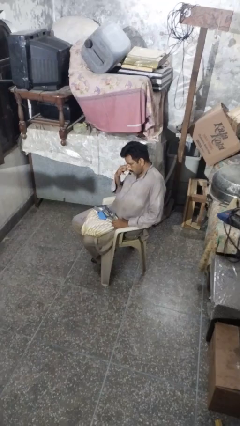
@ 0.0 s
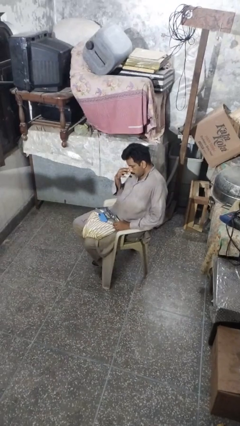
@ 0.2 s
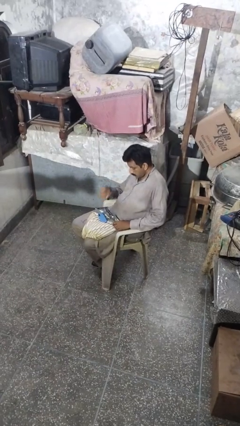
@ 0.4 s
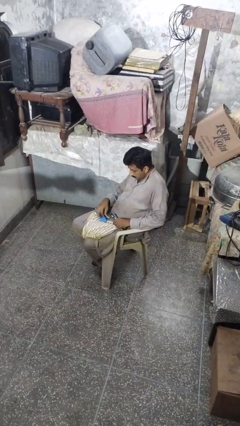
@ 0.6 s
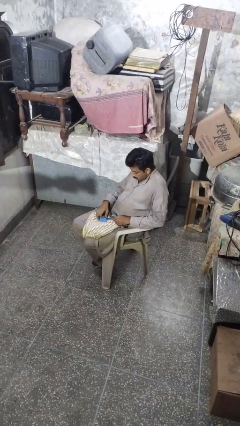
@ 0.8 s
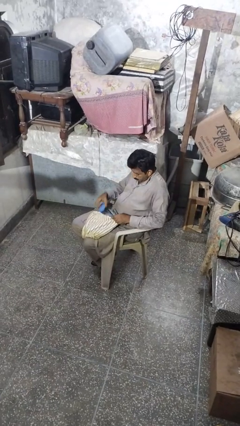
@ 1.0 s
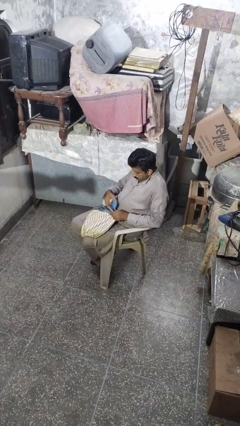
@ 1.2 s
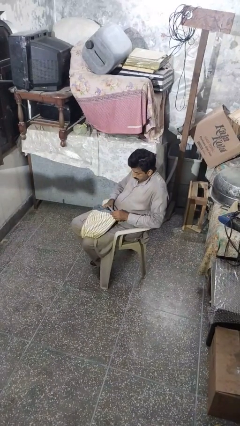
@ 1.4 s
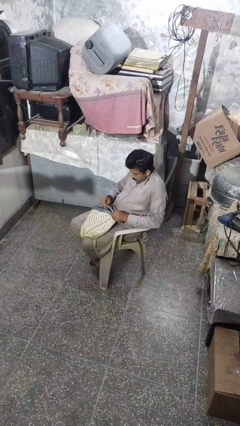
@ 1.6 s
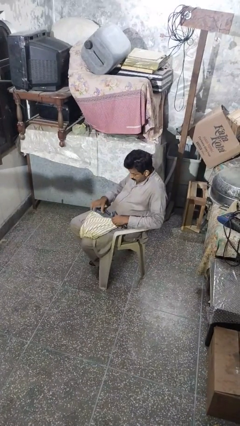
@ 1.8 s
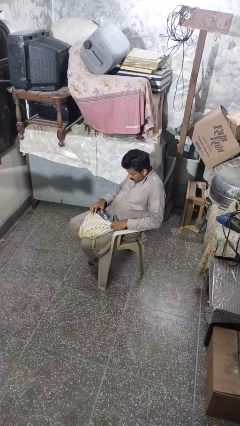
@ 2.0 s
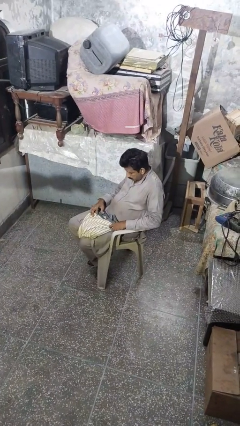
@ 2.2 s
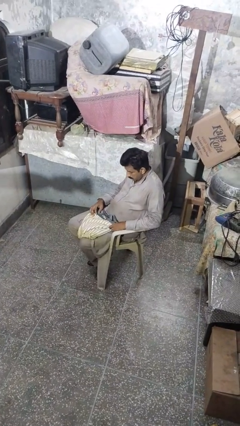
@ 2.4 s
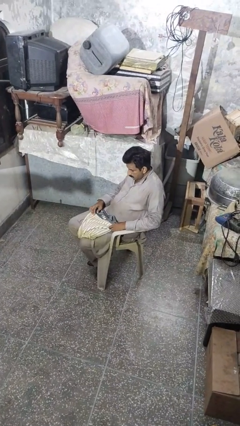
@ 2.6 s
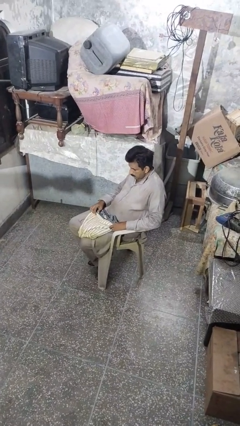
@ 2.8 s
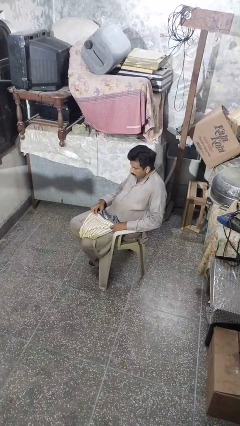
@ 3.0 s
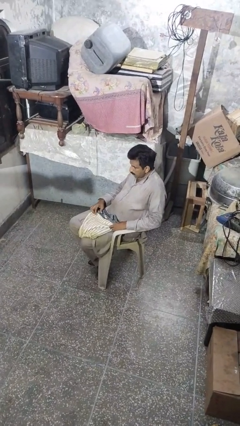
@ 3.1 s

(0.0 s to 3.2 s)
person puts object into purse

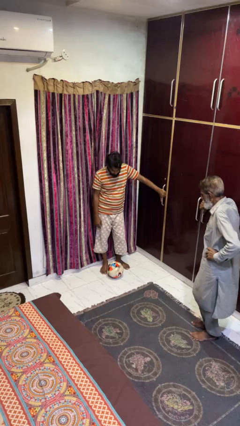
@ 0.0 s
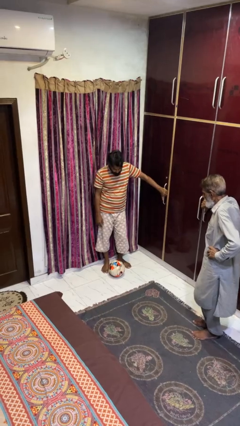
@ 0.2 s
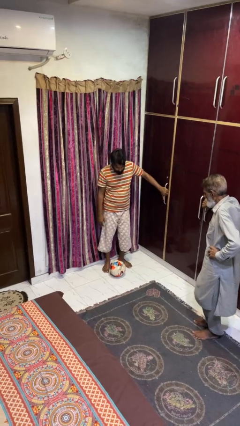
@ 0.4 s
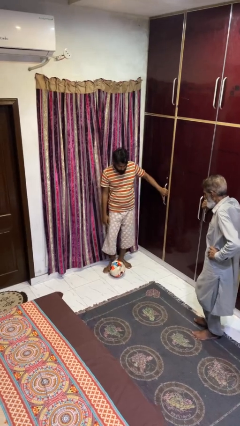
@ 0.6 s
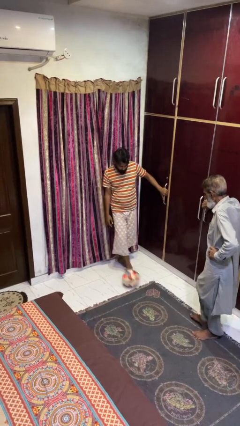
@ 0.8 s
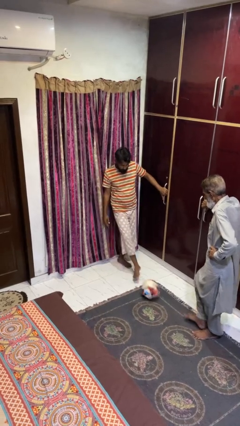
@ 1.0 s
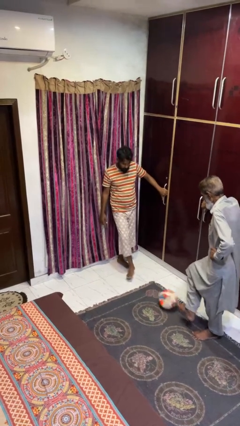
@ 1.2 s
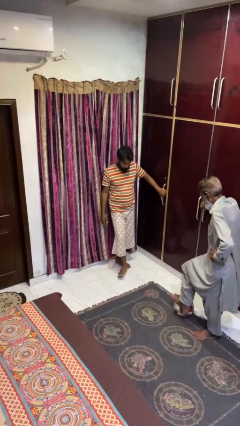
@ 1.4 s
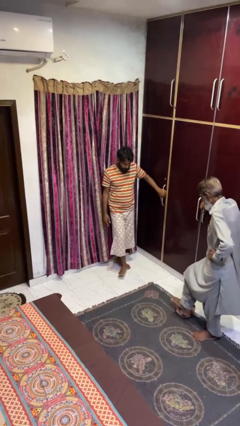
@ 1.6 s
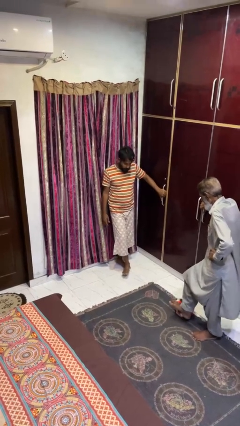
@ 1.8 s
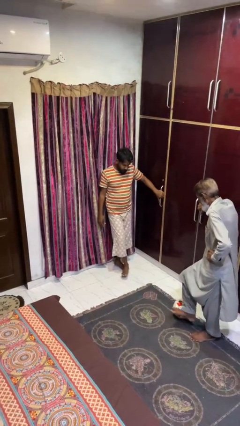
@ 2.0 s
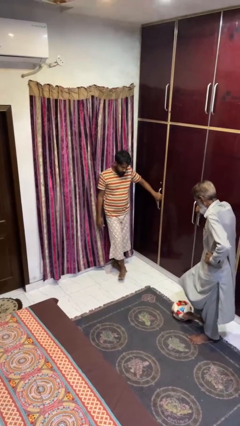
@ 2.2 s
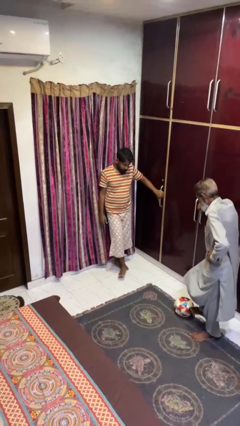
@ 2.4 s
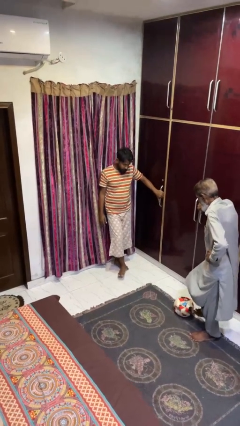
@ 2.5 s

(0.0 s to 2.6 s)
person kicks object to person

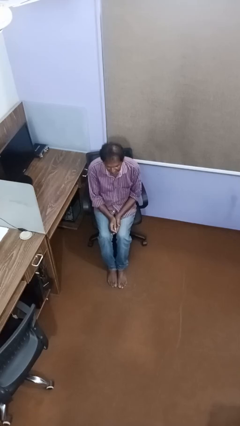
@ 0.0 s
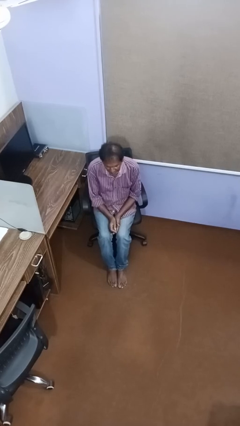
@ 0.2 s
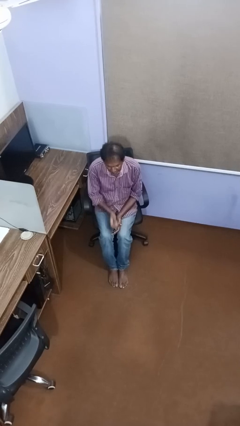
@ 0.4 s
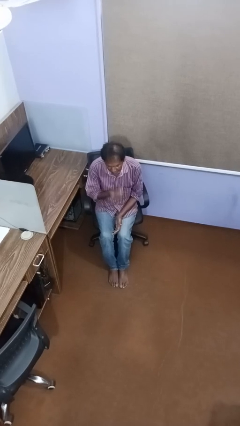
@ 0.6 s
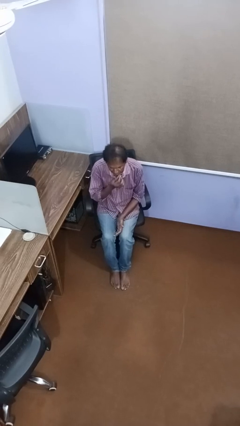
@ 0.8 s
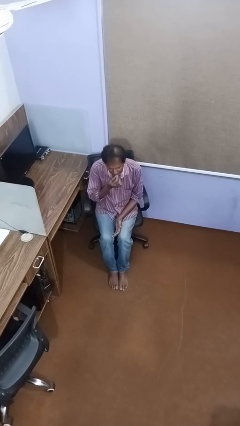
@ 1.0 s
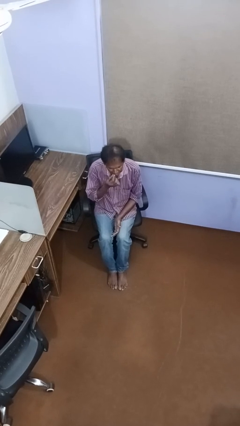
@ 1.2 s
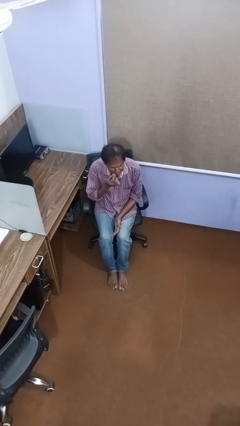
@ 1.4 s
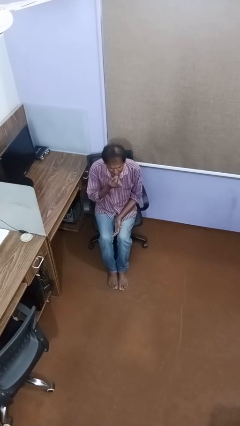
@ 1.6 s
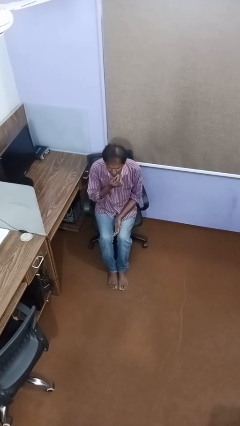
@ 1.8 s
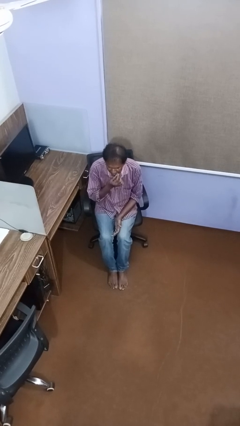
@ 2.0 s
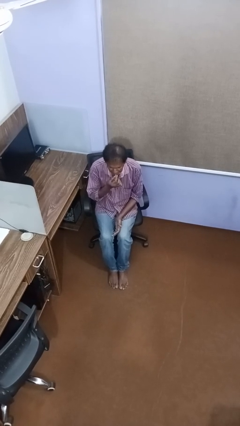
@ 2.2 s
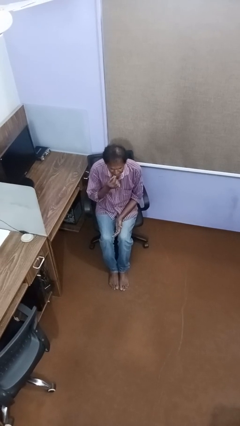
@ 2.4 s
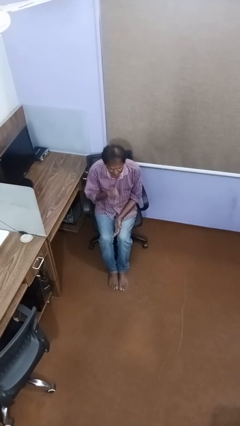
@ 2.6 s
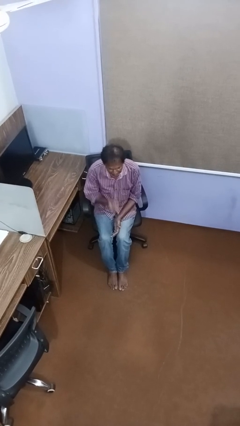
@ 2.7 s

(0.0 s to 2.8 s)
person applies lip makeup

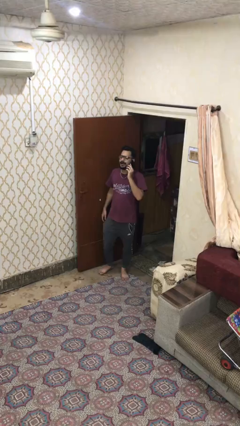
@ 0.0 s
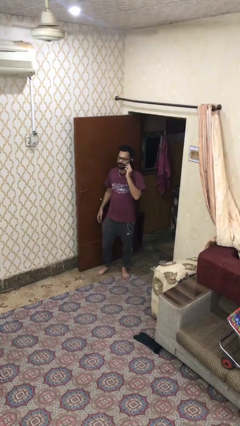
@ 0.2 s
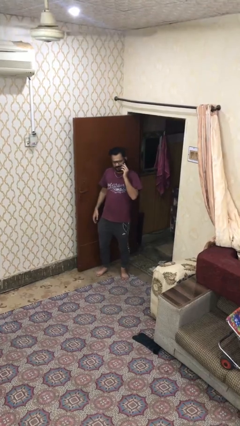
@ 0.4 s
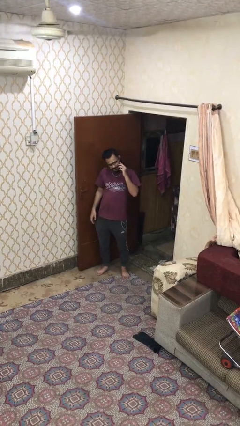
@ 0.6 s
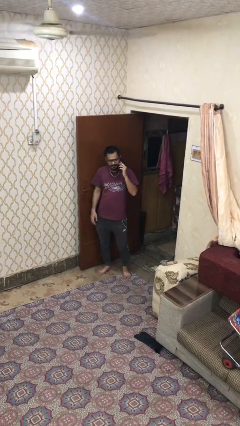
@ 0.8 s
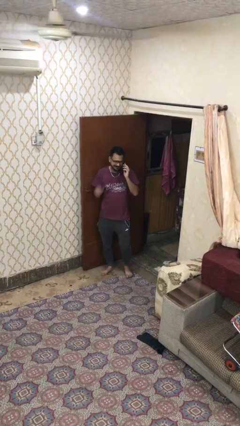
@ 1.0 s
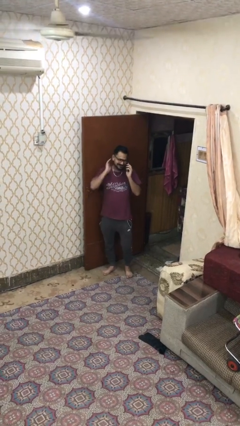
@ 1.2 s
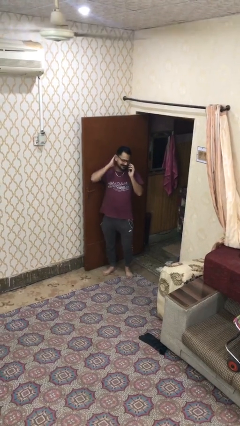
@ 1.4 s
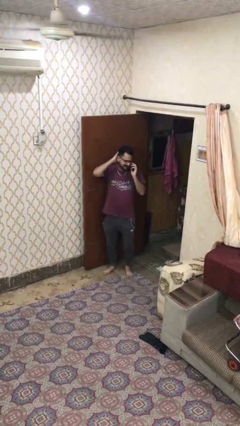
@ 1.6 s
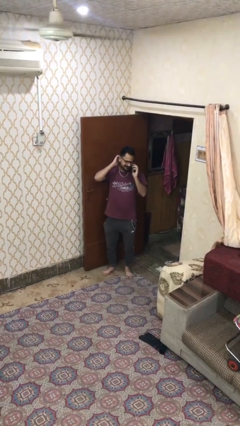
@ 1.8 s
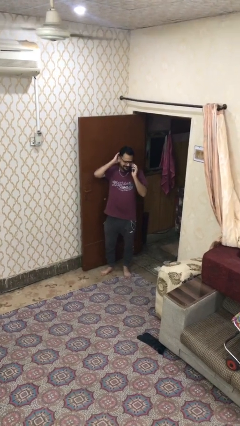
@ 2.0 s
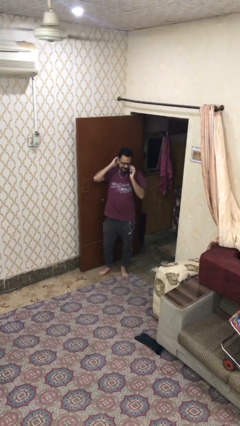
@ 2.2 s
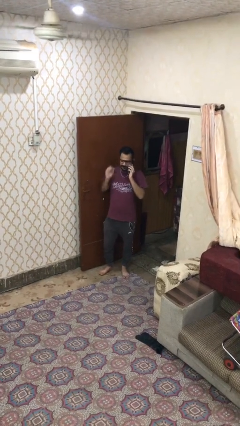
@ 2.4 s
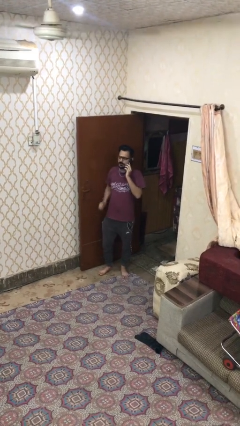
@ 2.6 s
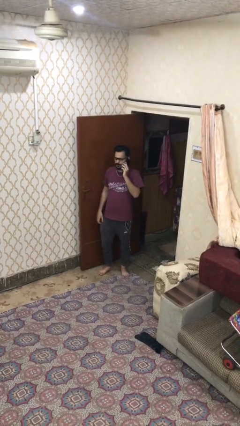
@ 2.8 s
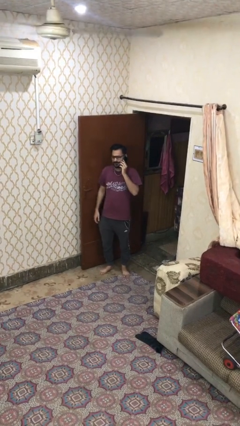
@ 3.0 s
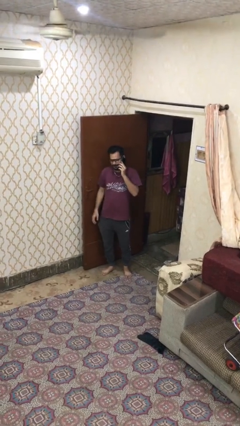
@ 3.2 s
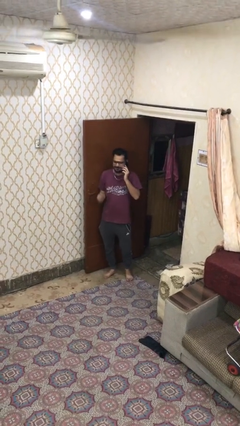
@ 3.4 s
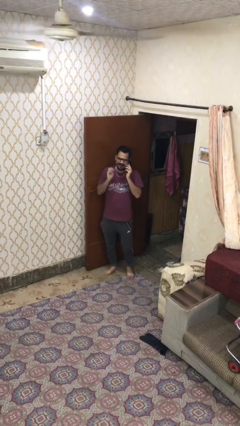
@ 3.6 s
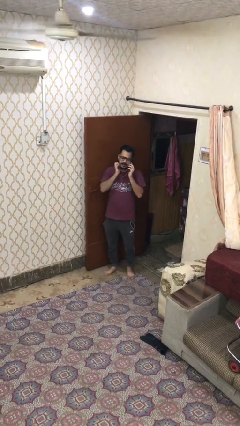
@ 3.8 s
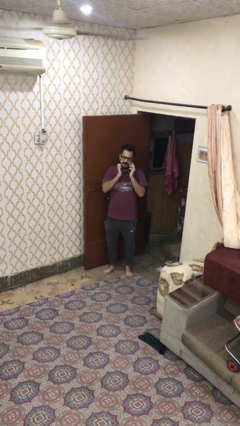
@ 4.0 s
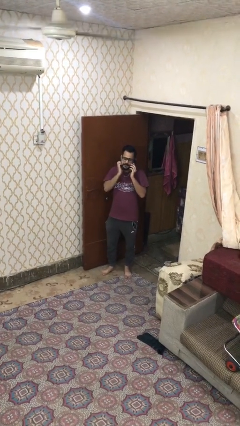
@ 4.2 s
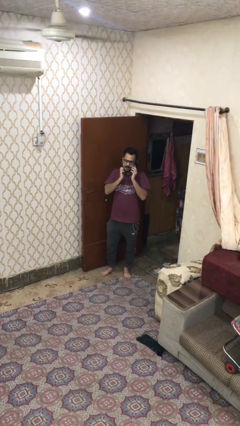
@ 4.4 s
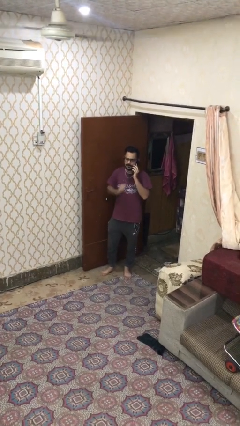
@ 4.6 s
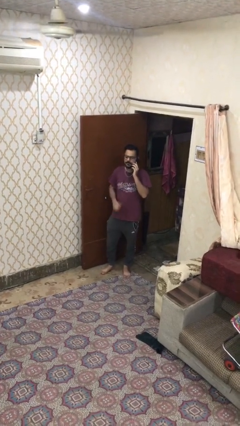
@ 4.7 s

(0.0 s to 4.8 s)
person talks on phone

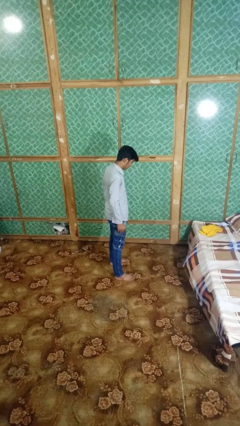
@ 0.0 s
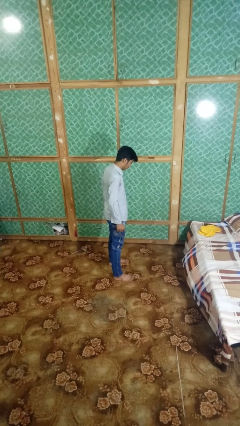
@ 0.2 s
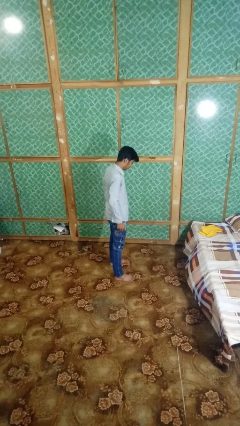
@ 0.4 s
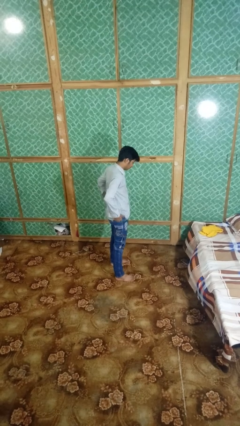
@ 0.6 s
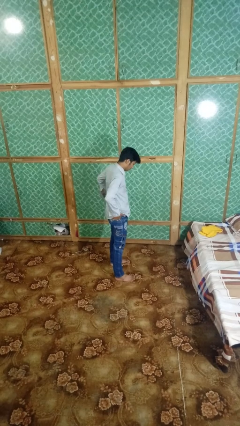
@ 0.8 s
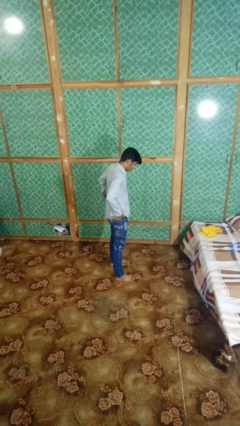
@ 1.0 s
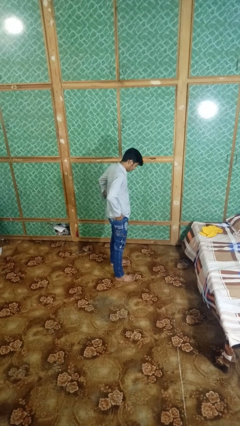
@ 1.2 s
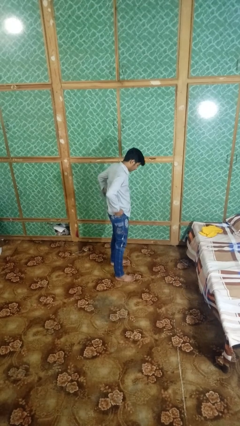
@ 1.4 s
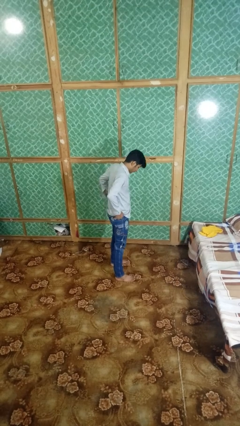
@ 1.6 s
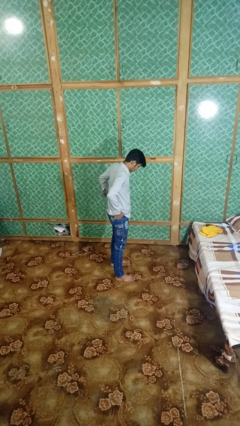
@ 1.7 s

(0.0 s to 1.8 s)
person hikes up pants

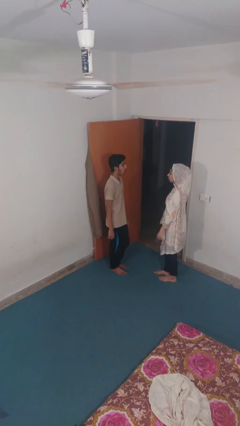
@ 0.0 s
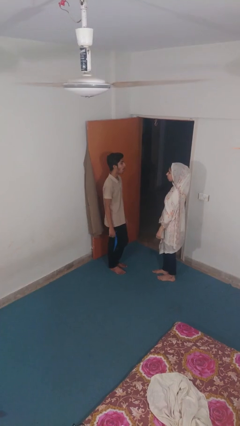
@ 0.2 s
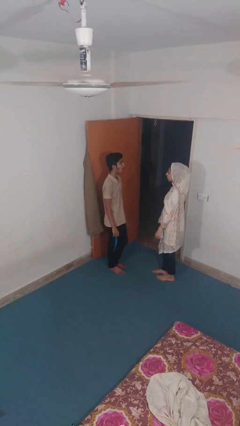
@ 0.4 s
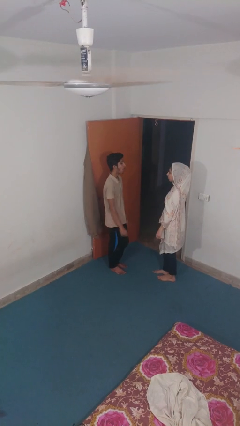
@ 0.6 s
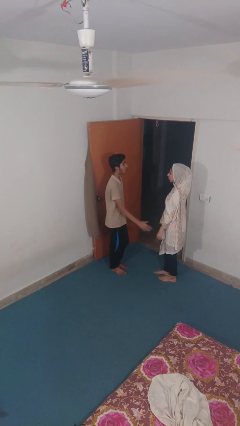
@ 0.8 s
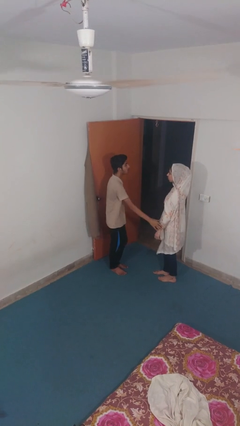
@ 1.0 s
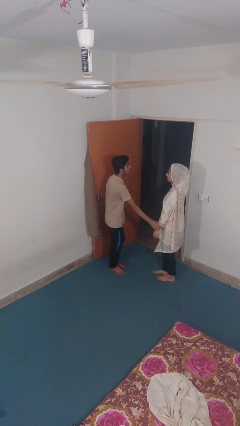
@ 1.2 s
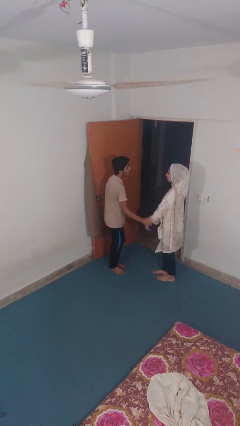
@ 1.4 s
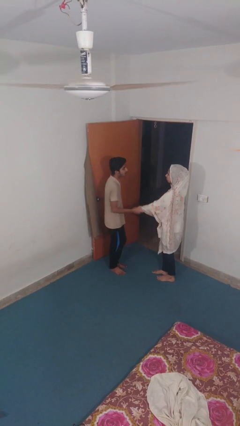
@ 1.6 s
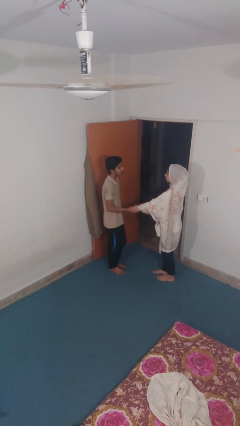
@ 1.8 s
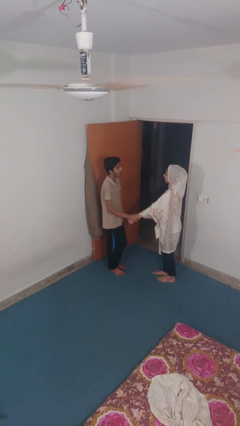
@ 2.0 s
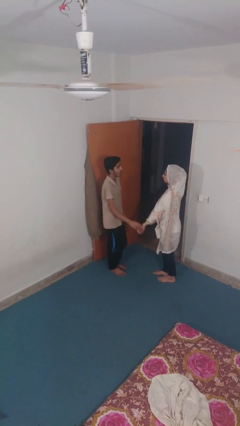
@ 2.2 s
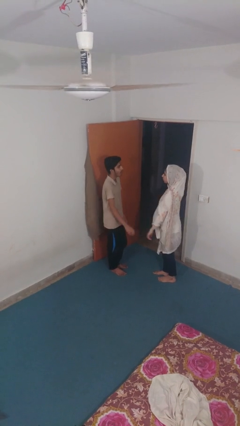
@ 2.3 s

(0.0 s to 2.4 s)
person grabs person by forearm
